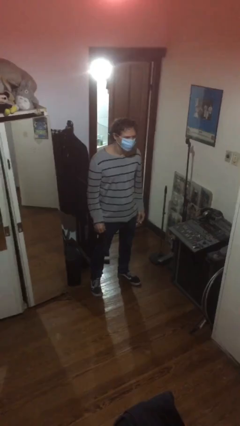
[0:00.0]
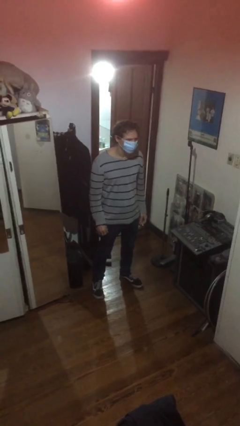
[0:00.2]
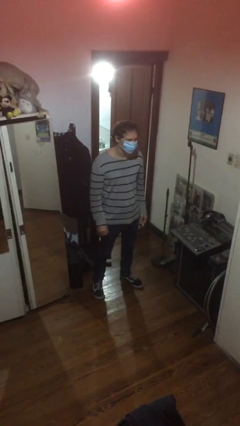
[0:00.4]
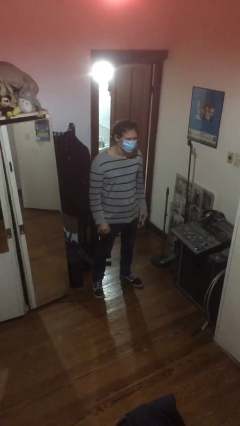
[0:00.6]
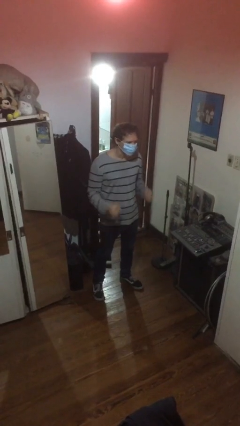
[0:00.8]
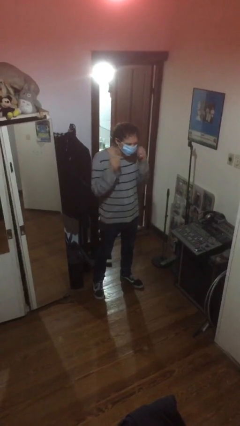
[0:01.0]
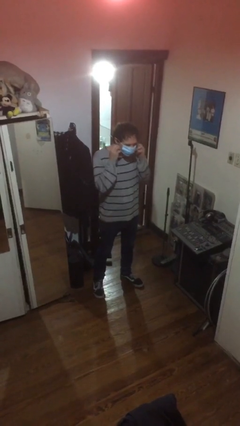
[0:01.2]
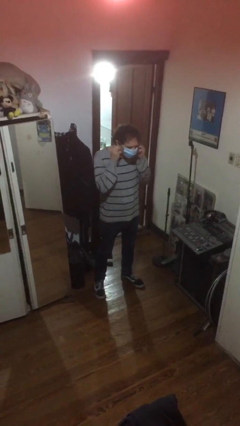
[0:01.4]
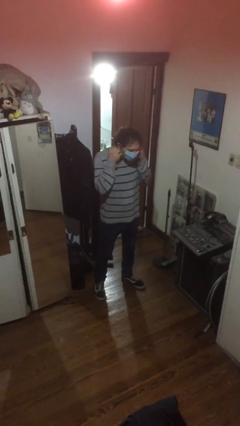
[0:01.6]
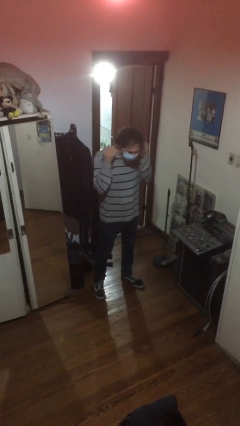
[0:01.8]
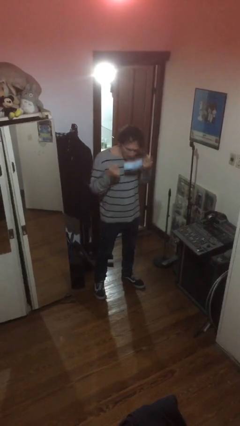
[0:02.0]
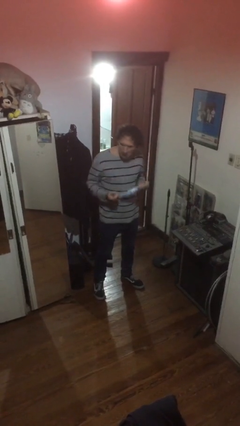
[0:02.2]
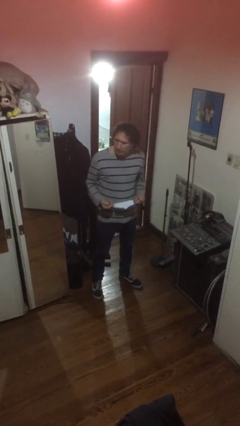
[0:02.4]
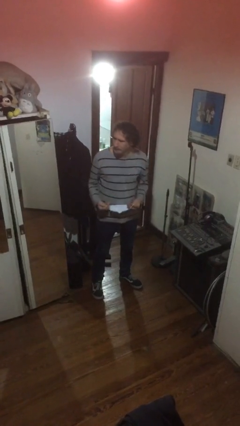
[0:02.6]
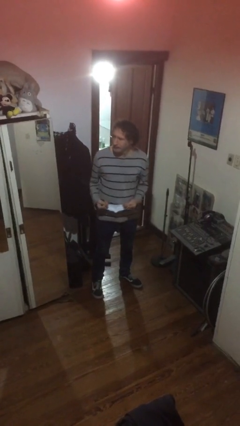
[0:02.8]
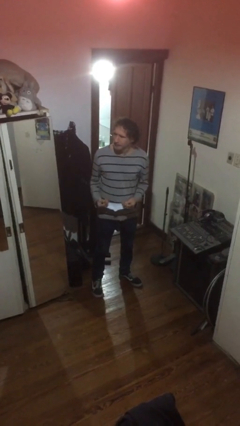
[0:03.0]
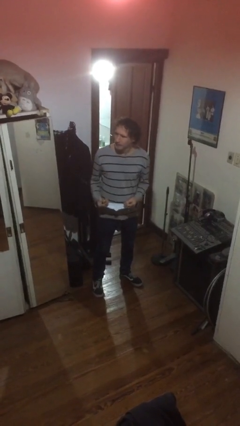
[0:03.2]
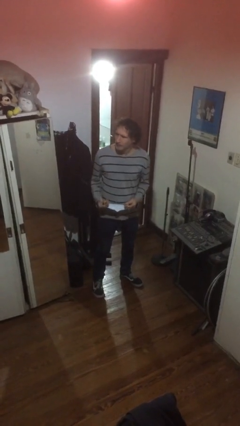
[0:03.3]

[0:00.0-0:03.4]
person takes off facemask

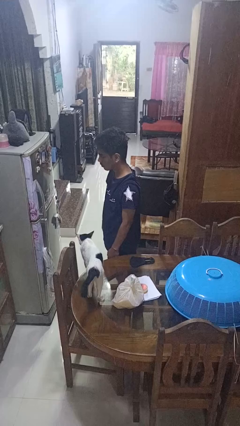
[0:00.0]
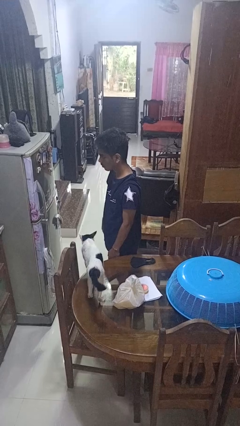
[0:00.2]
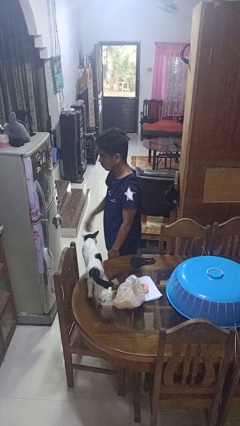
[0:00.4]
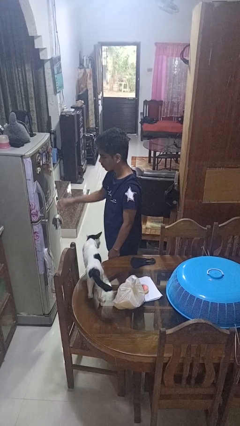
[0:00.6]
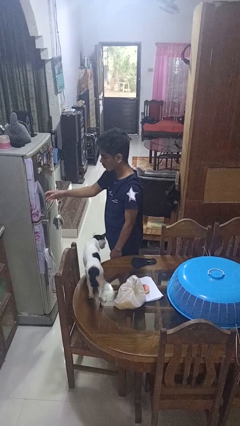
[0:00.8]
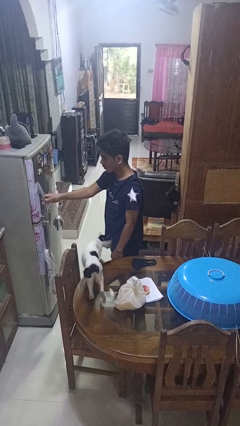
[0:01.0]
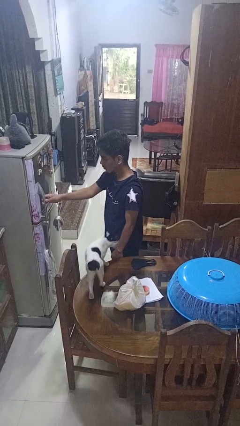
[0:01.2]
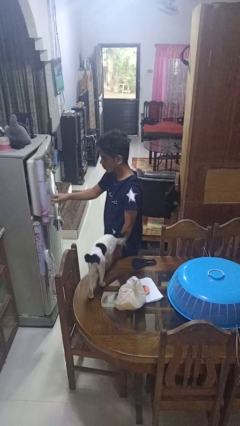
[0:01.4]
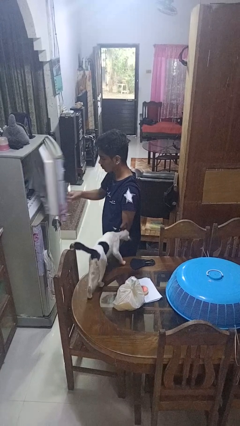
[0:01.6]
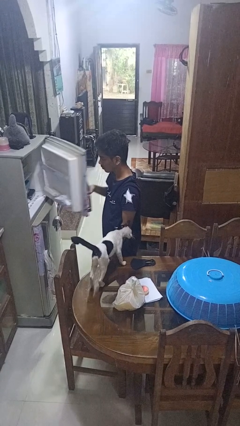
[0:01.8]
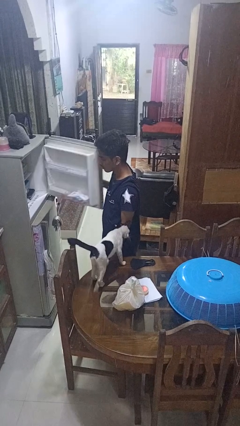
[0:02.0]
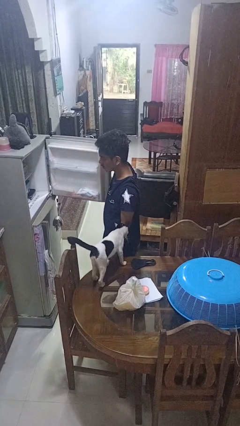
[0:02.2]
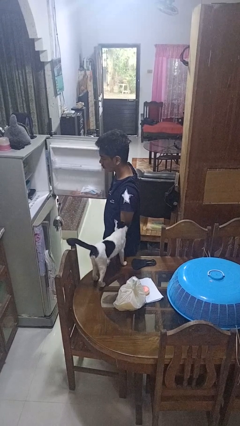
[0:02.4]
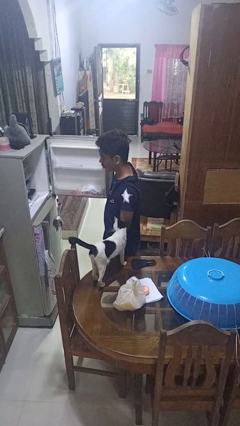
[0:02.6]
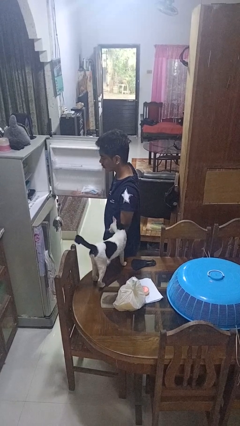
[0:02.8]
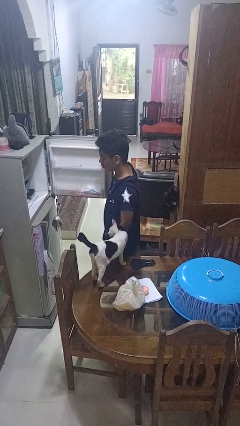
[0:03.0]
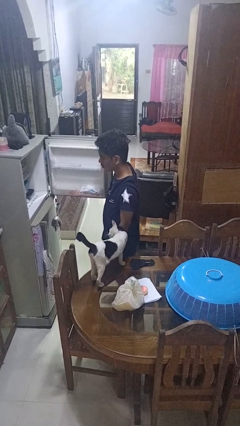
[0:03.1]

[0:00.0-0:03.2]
person opens refrigerator

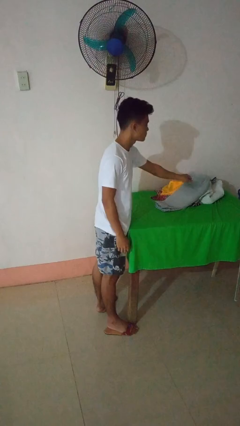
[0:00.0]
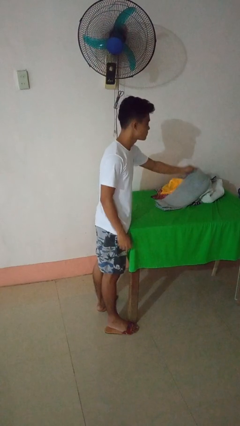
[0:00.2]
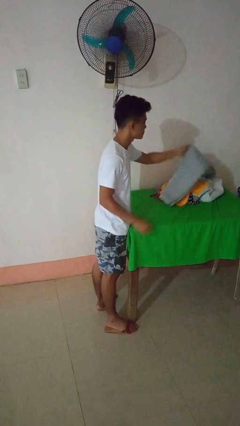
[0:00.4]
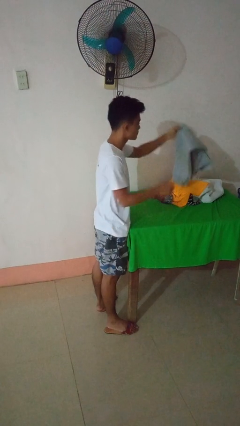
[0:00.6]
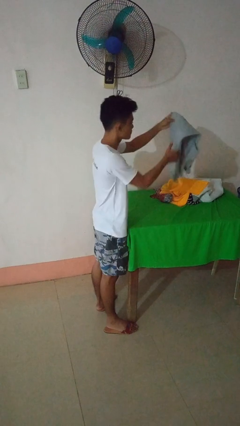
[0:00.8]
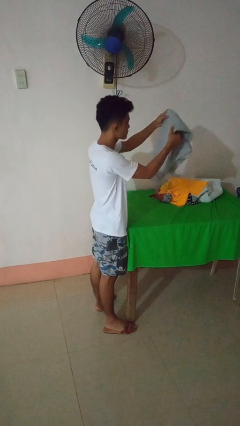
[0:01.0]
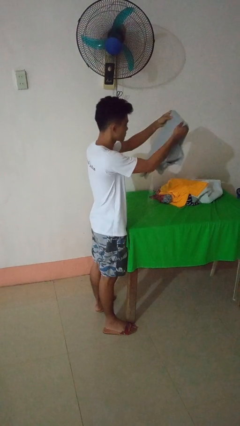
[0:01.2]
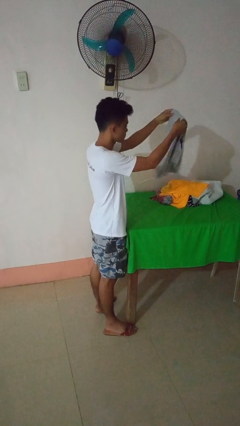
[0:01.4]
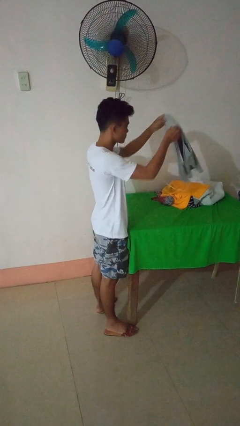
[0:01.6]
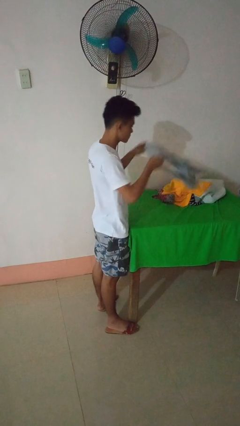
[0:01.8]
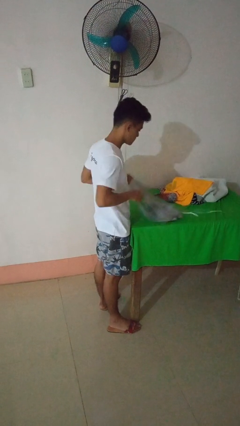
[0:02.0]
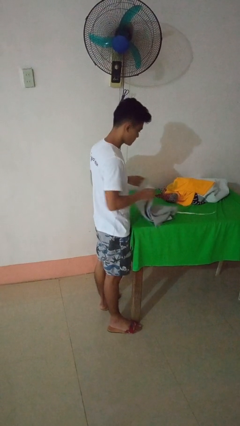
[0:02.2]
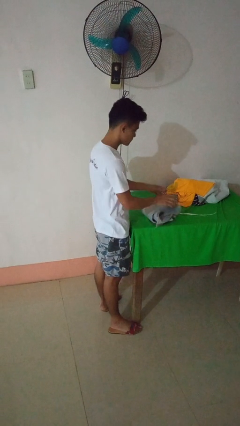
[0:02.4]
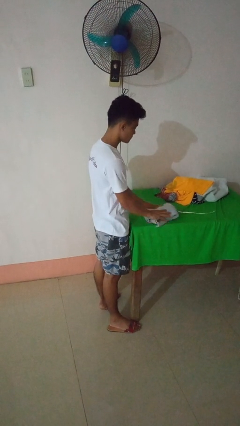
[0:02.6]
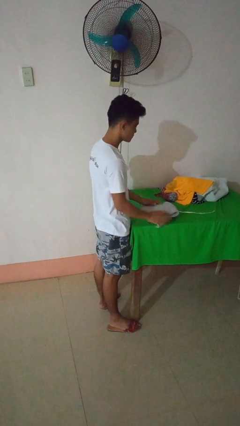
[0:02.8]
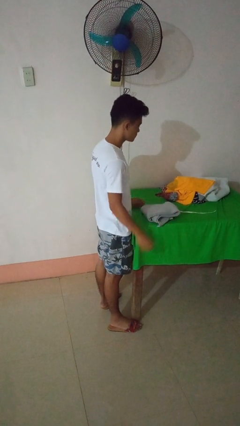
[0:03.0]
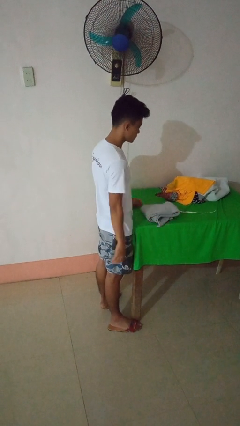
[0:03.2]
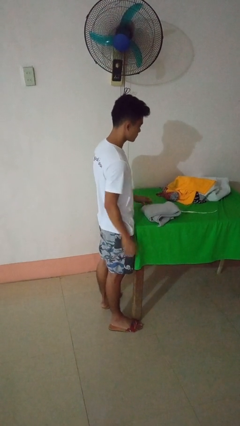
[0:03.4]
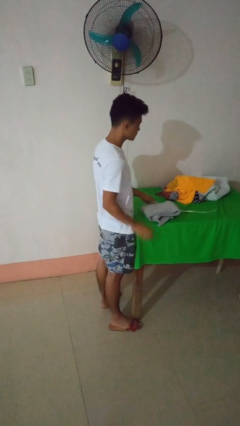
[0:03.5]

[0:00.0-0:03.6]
person folds pants

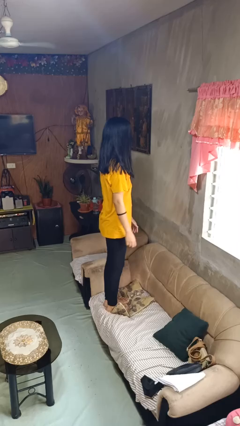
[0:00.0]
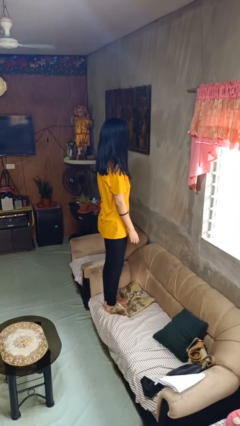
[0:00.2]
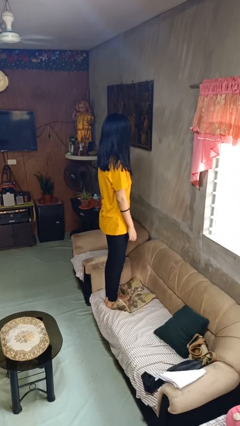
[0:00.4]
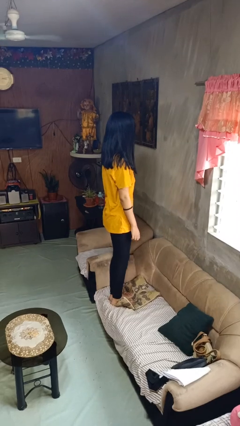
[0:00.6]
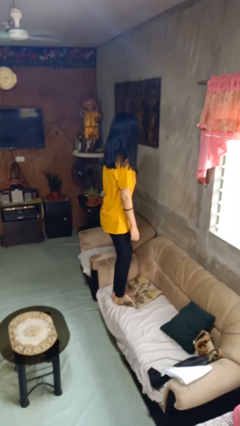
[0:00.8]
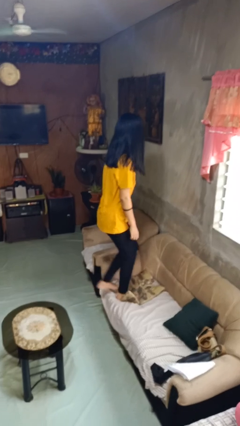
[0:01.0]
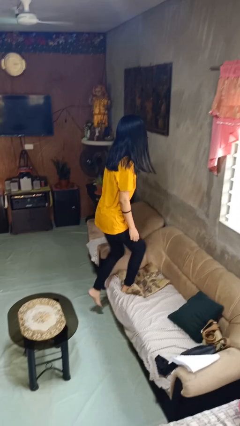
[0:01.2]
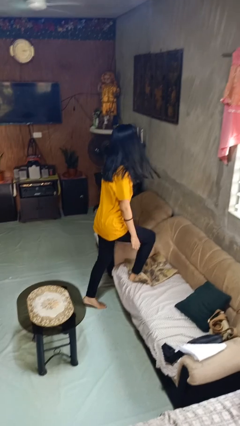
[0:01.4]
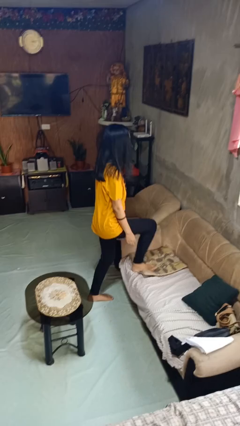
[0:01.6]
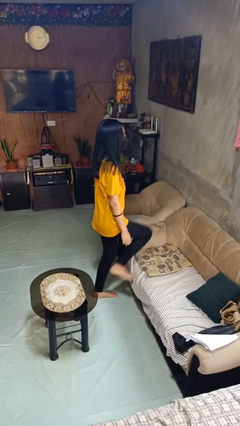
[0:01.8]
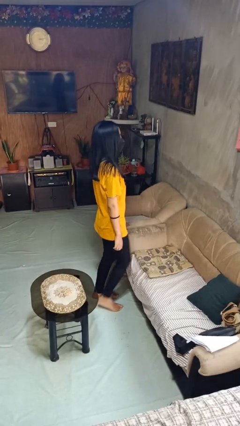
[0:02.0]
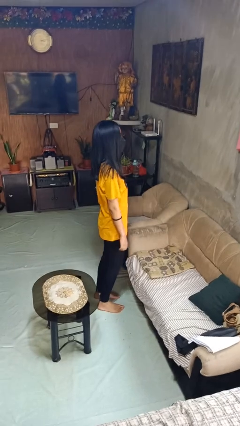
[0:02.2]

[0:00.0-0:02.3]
person climbs off couch

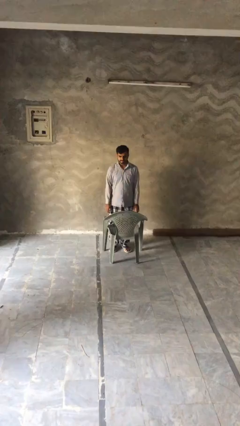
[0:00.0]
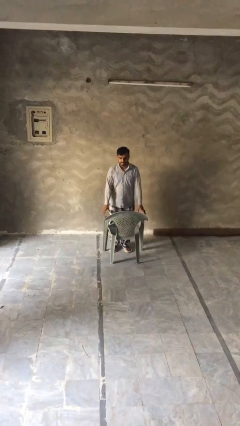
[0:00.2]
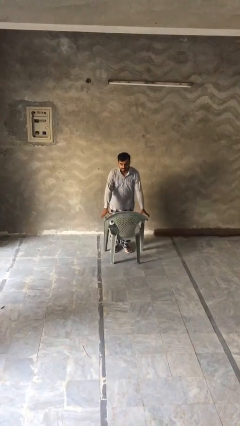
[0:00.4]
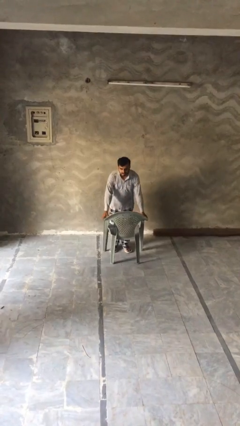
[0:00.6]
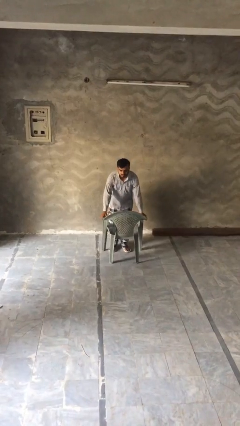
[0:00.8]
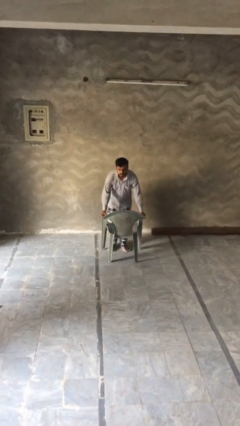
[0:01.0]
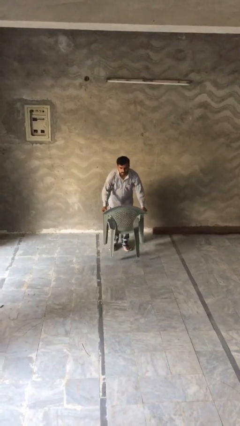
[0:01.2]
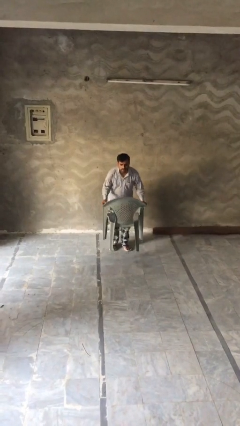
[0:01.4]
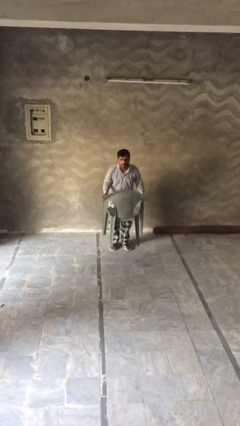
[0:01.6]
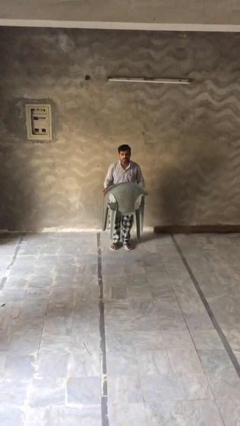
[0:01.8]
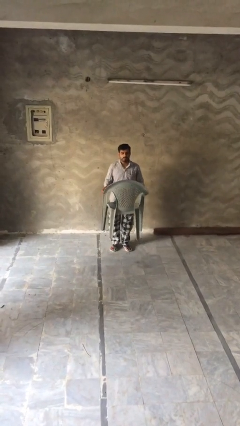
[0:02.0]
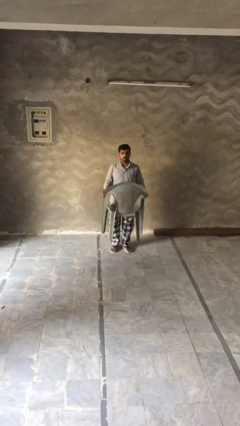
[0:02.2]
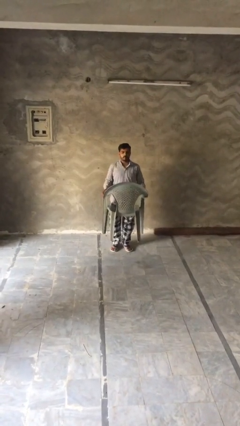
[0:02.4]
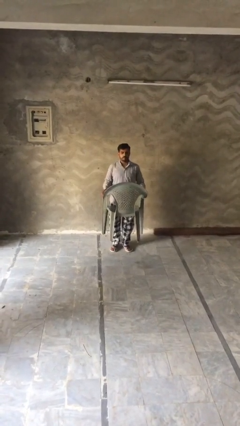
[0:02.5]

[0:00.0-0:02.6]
person picks up object from floor

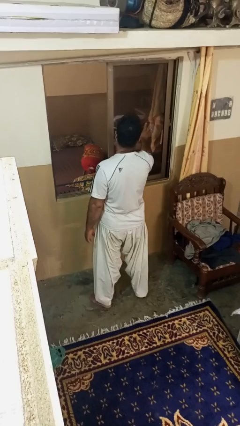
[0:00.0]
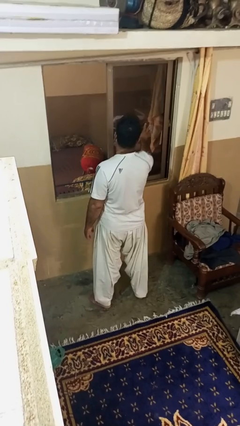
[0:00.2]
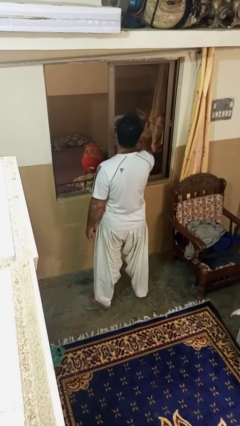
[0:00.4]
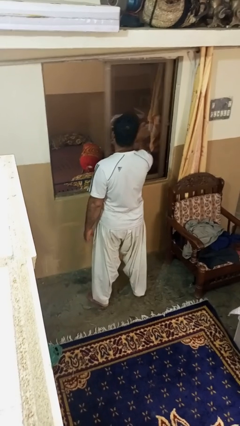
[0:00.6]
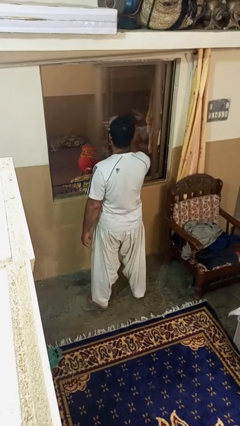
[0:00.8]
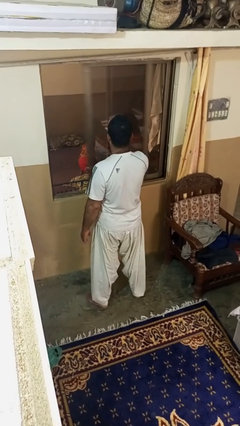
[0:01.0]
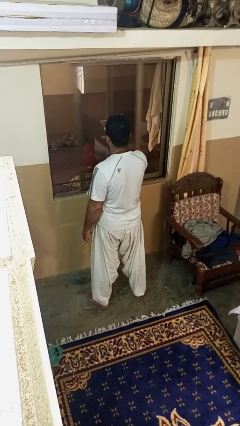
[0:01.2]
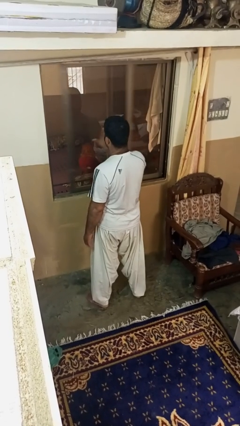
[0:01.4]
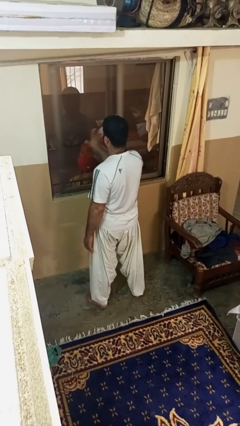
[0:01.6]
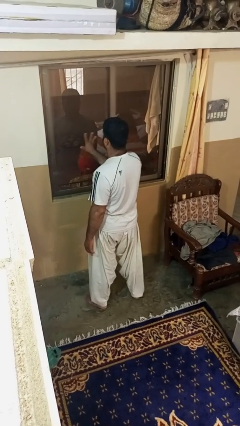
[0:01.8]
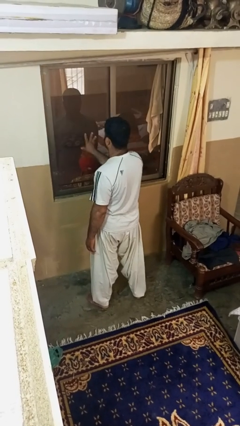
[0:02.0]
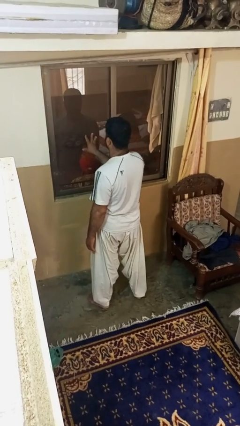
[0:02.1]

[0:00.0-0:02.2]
person closes home window
